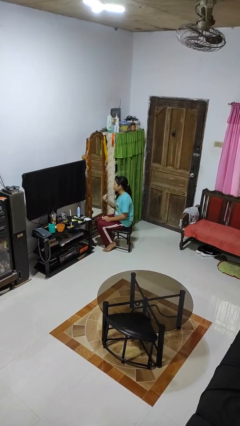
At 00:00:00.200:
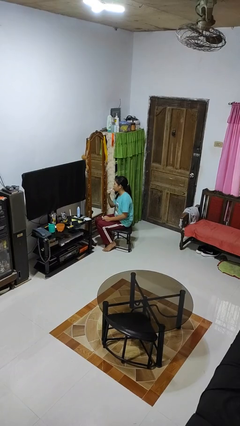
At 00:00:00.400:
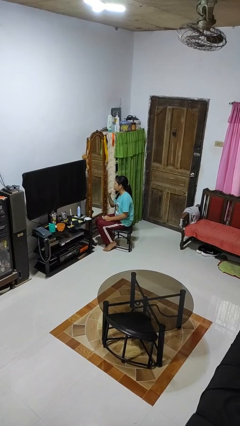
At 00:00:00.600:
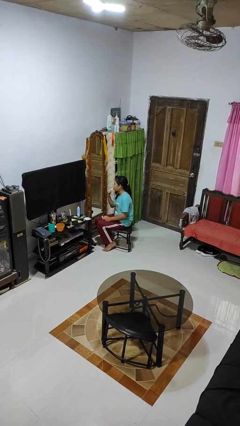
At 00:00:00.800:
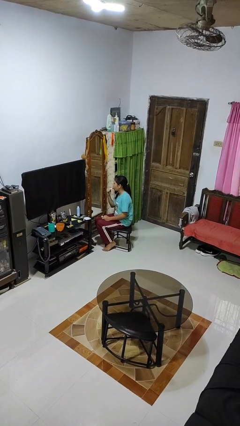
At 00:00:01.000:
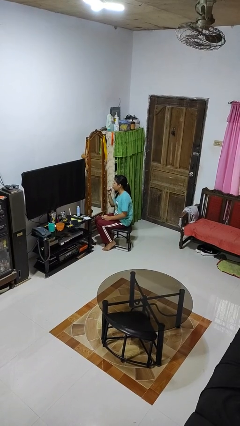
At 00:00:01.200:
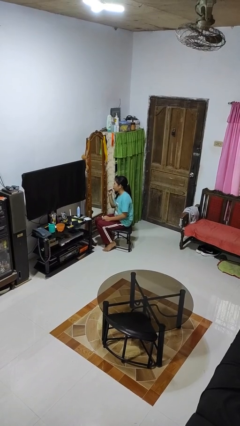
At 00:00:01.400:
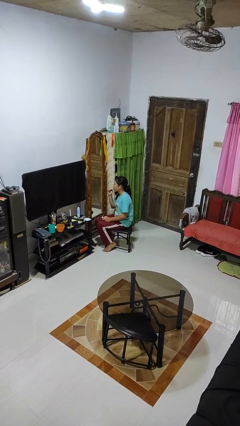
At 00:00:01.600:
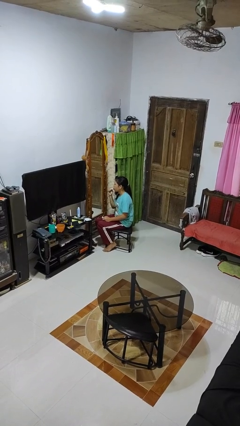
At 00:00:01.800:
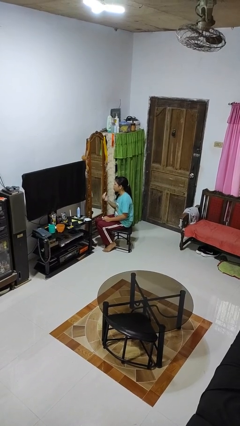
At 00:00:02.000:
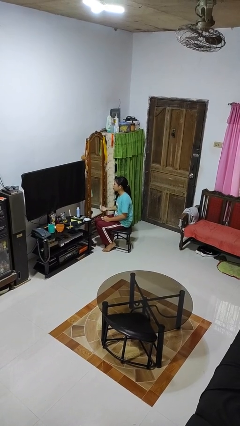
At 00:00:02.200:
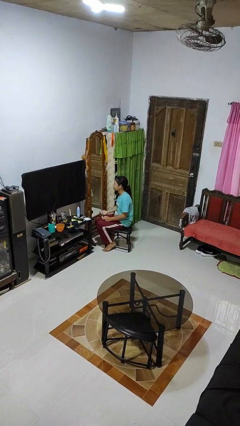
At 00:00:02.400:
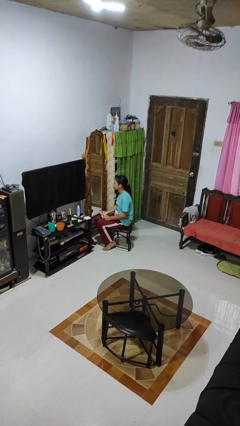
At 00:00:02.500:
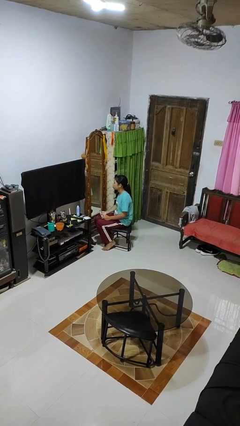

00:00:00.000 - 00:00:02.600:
person applies lip makeup

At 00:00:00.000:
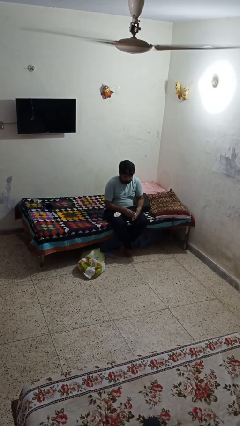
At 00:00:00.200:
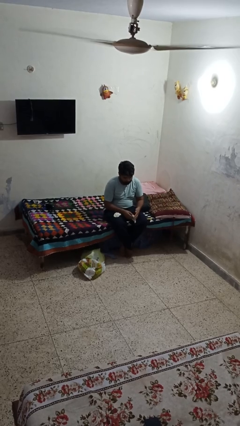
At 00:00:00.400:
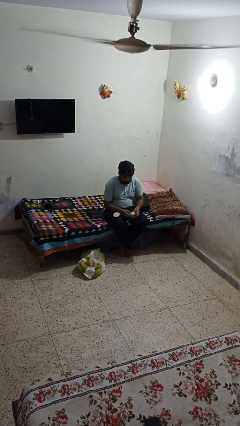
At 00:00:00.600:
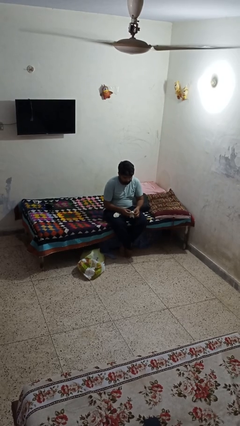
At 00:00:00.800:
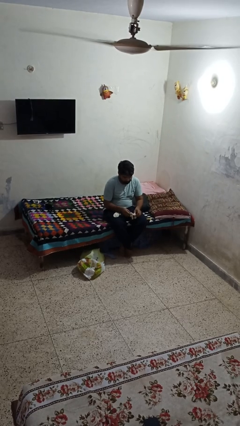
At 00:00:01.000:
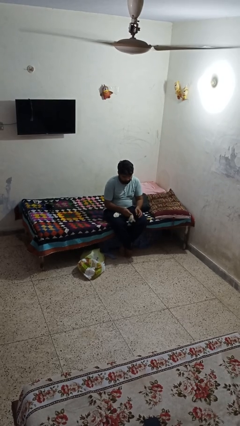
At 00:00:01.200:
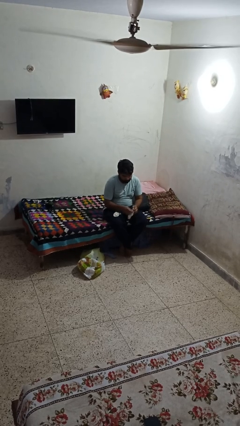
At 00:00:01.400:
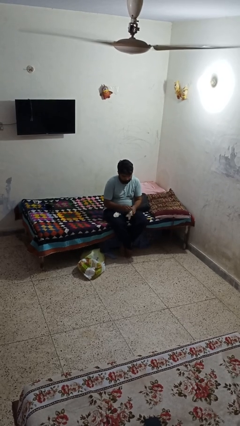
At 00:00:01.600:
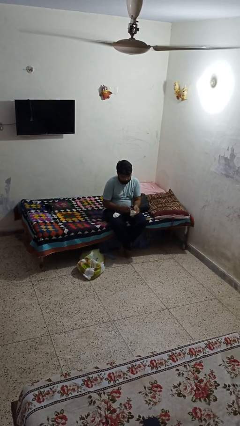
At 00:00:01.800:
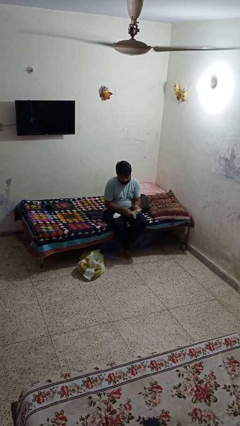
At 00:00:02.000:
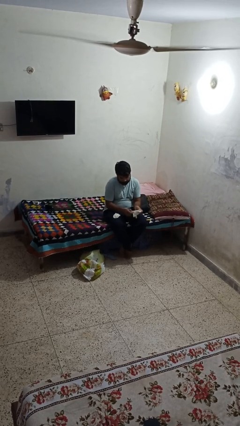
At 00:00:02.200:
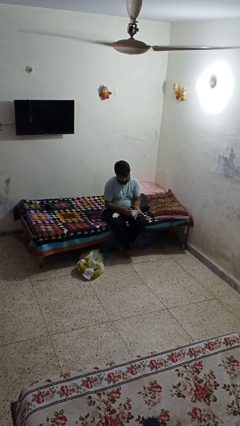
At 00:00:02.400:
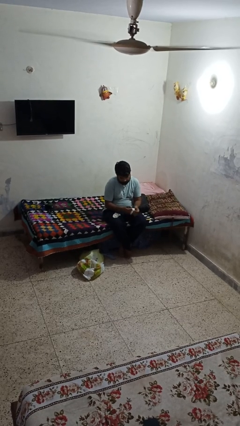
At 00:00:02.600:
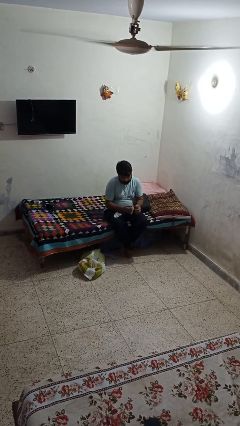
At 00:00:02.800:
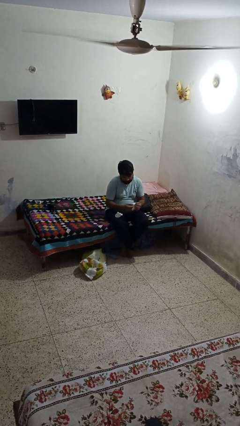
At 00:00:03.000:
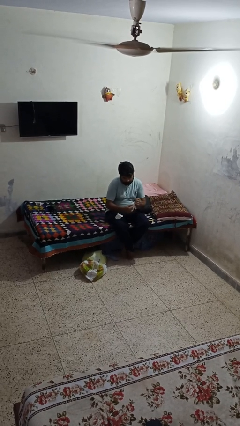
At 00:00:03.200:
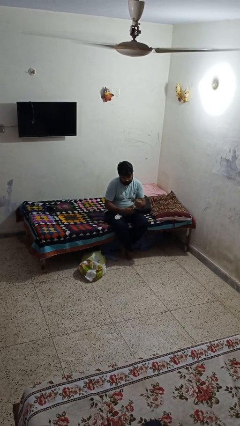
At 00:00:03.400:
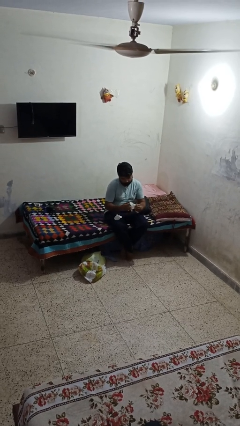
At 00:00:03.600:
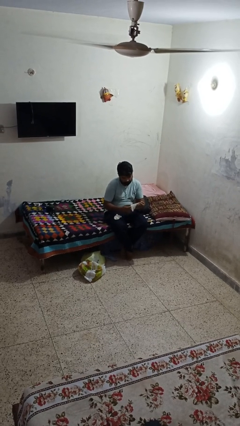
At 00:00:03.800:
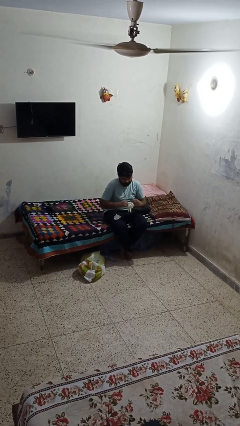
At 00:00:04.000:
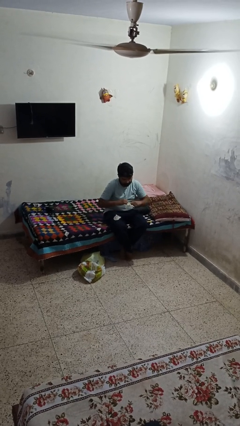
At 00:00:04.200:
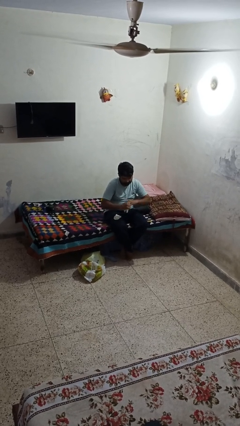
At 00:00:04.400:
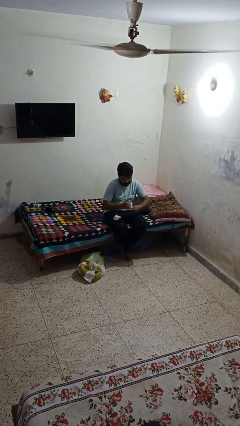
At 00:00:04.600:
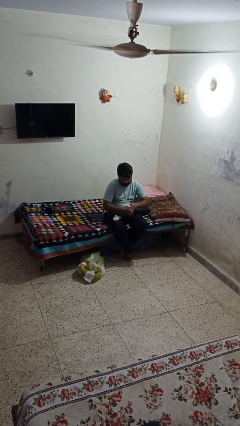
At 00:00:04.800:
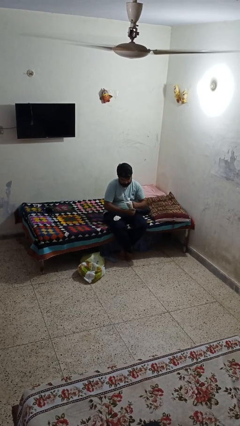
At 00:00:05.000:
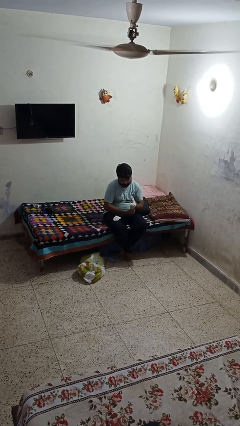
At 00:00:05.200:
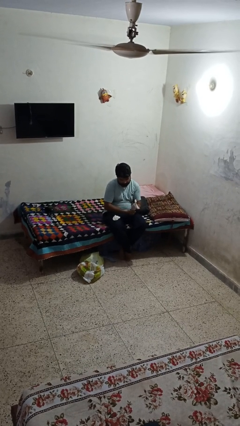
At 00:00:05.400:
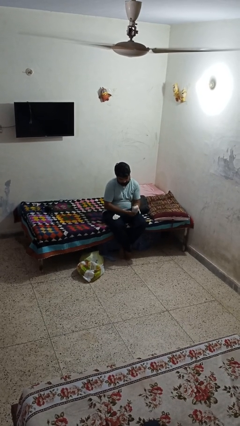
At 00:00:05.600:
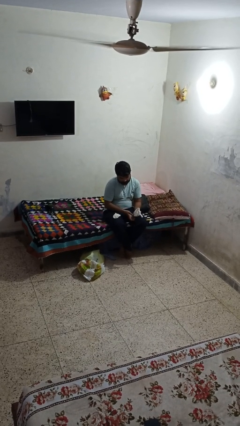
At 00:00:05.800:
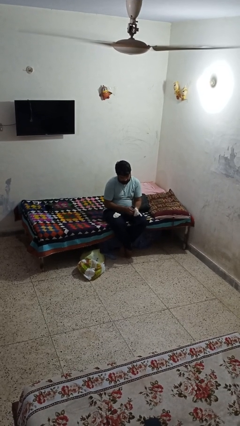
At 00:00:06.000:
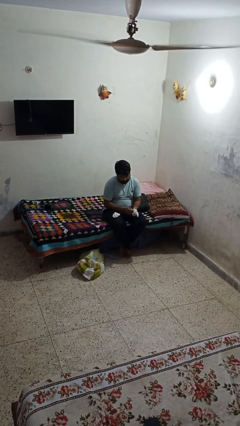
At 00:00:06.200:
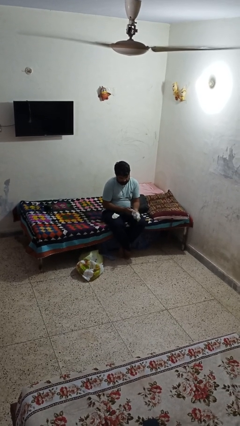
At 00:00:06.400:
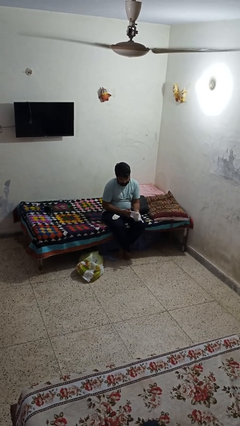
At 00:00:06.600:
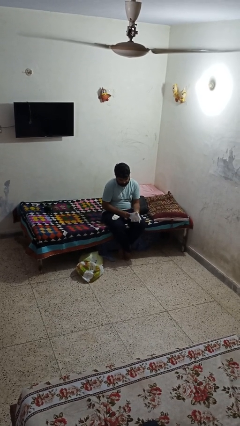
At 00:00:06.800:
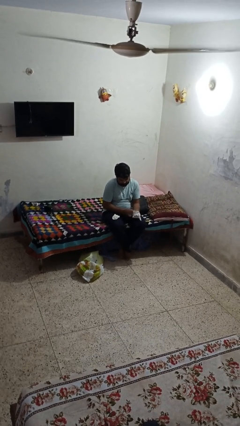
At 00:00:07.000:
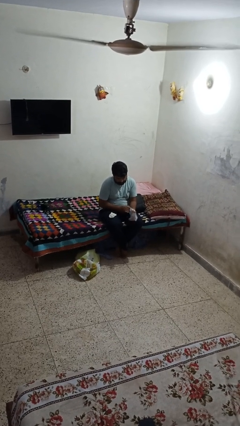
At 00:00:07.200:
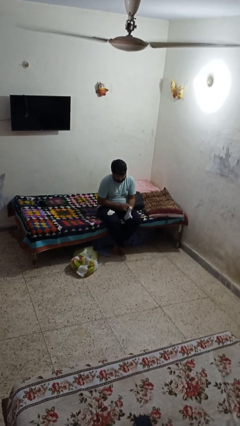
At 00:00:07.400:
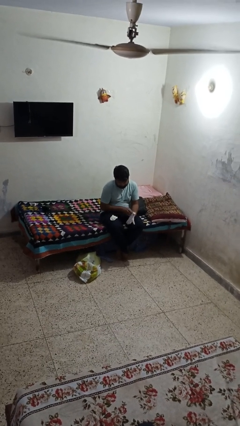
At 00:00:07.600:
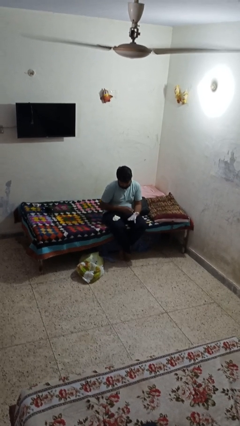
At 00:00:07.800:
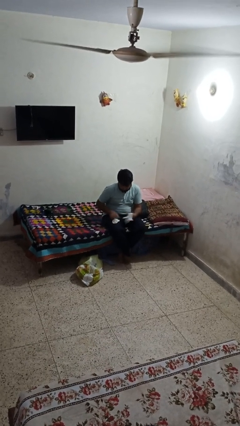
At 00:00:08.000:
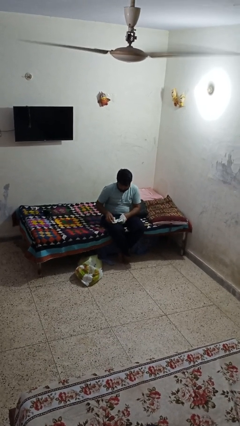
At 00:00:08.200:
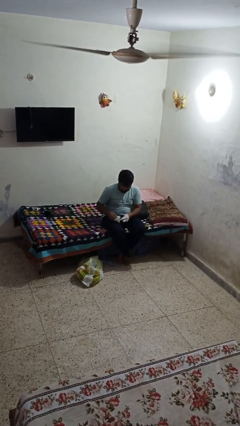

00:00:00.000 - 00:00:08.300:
person puts on gloves

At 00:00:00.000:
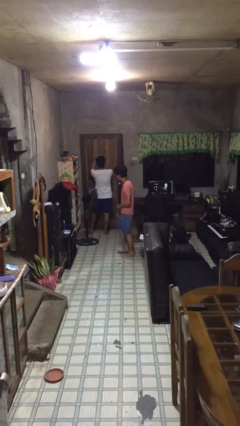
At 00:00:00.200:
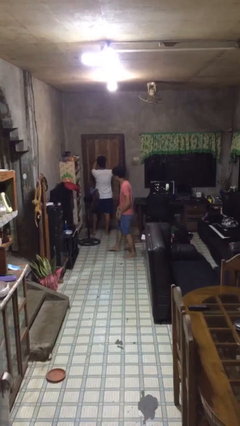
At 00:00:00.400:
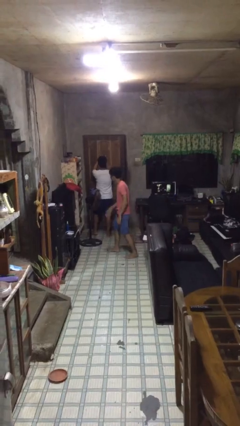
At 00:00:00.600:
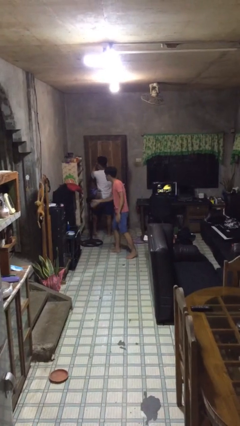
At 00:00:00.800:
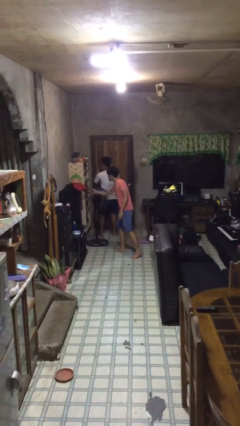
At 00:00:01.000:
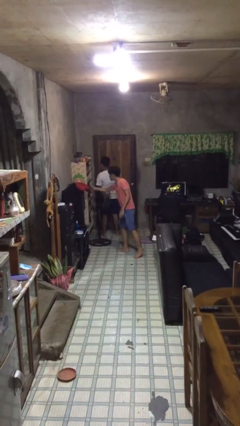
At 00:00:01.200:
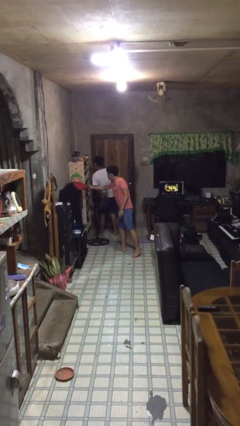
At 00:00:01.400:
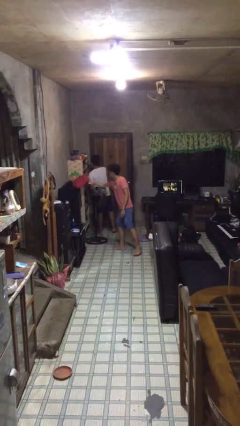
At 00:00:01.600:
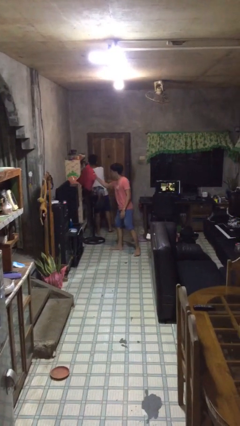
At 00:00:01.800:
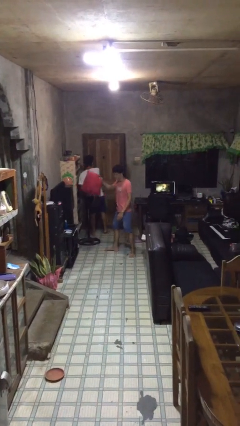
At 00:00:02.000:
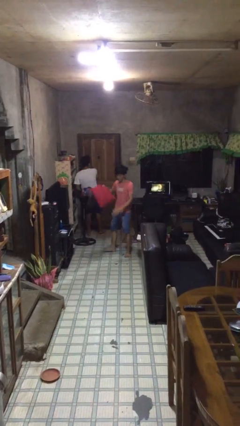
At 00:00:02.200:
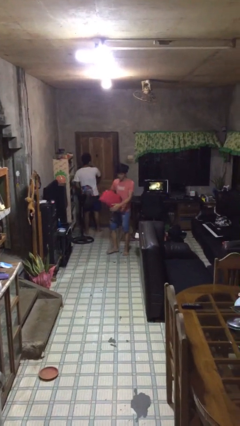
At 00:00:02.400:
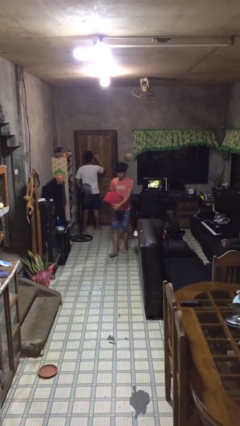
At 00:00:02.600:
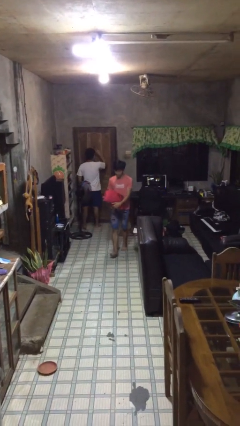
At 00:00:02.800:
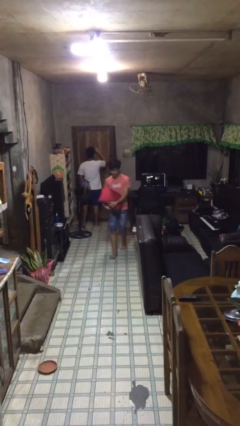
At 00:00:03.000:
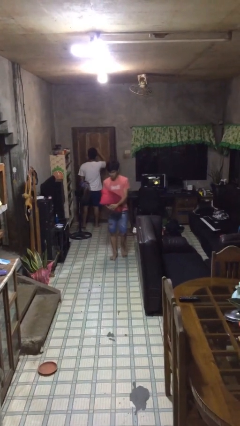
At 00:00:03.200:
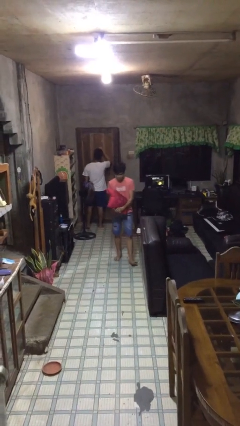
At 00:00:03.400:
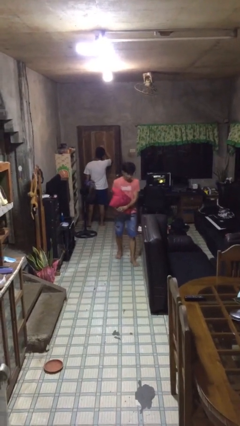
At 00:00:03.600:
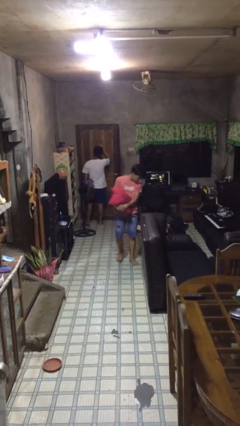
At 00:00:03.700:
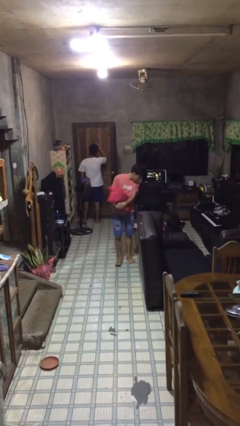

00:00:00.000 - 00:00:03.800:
person steals object from person

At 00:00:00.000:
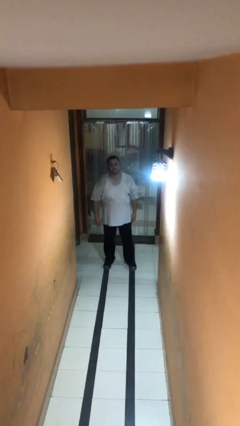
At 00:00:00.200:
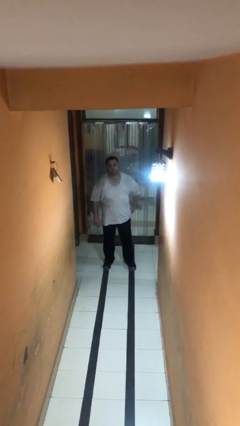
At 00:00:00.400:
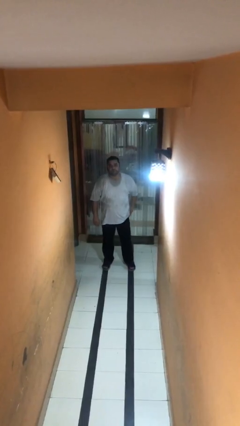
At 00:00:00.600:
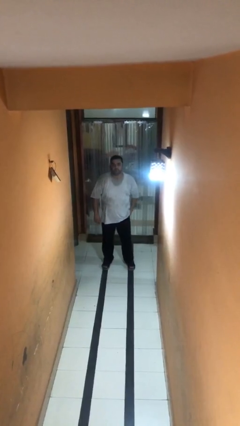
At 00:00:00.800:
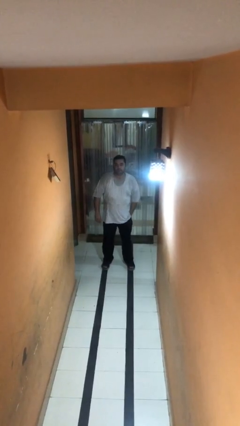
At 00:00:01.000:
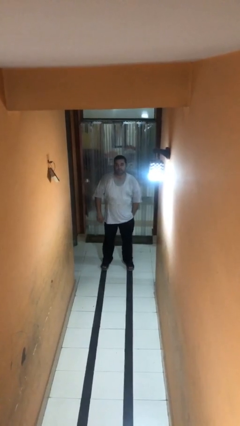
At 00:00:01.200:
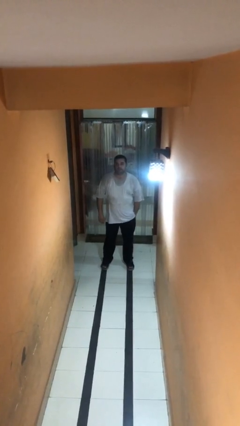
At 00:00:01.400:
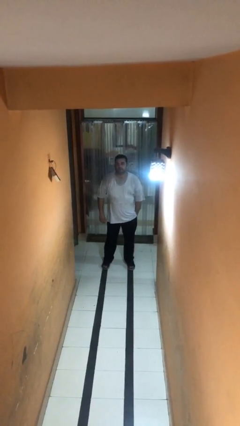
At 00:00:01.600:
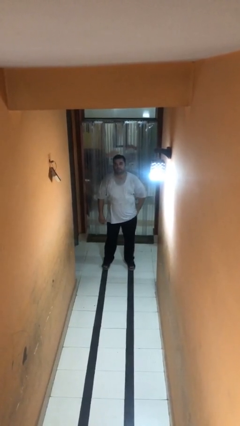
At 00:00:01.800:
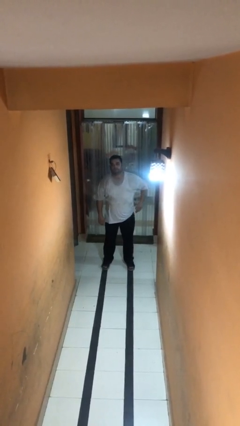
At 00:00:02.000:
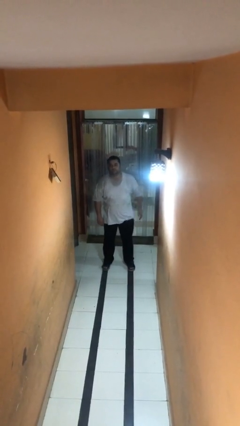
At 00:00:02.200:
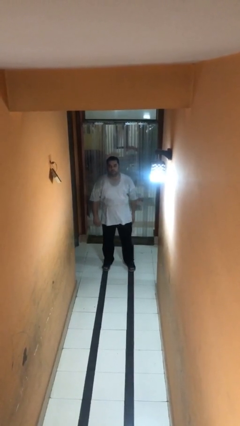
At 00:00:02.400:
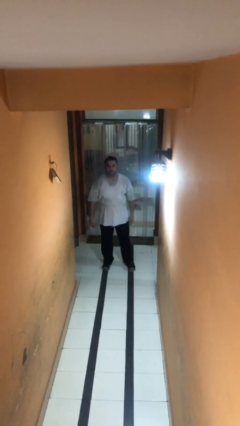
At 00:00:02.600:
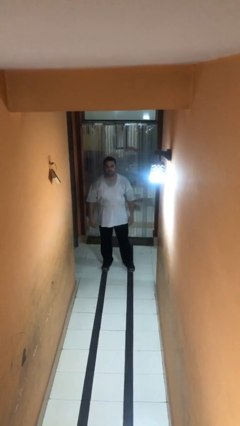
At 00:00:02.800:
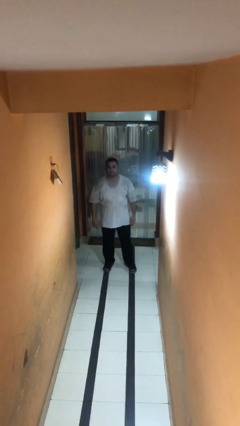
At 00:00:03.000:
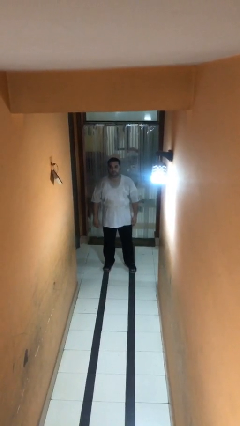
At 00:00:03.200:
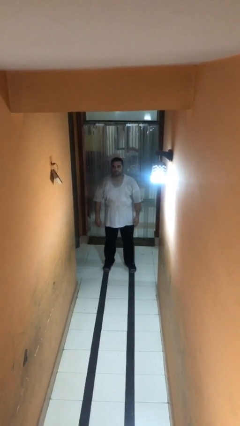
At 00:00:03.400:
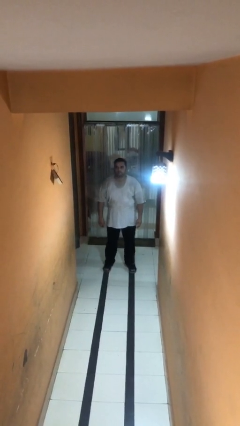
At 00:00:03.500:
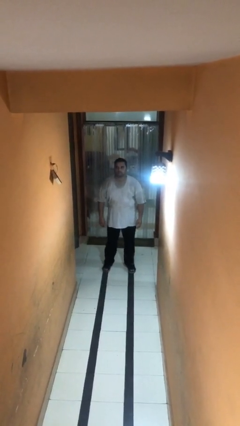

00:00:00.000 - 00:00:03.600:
person puts hands in back pockets
